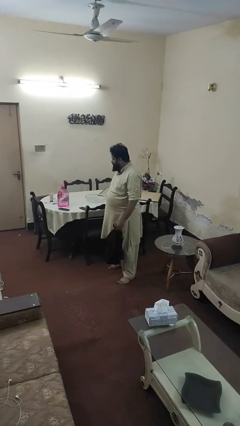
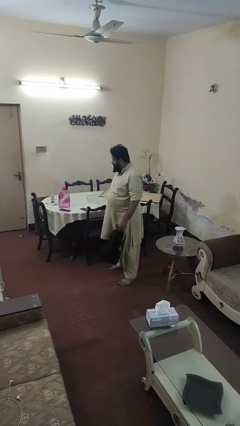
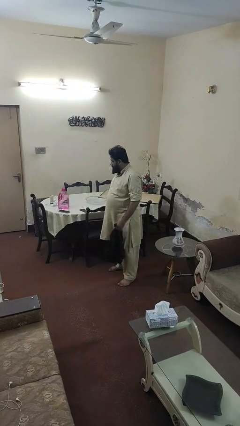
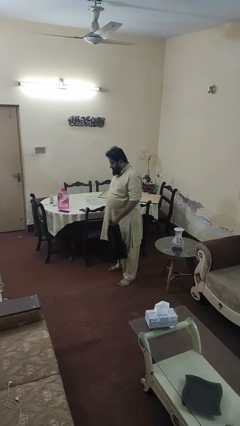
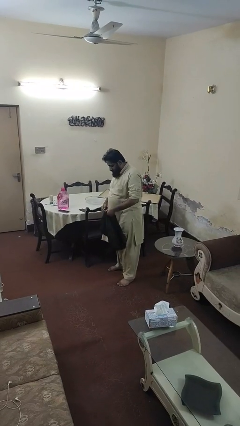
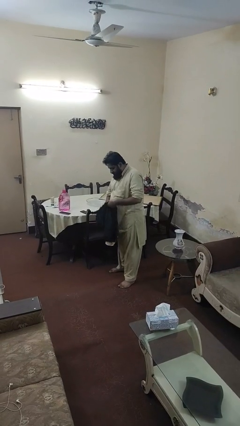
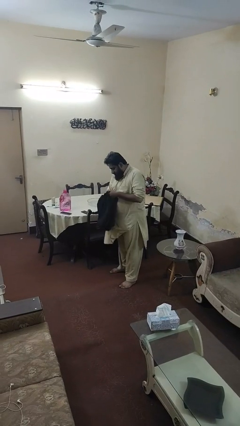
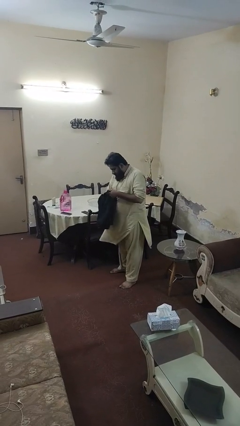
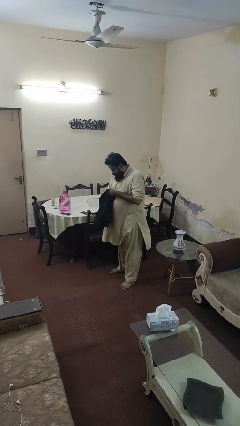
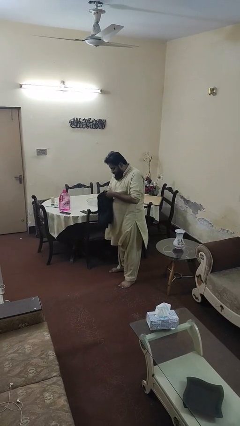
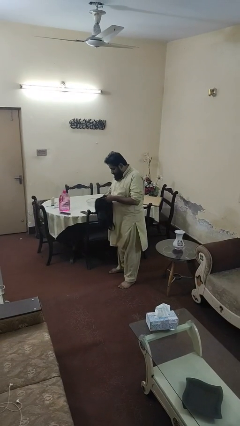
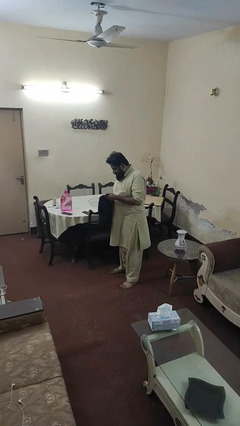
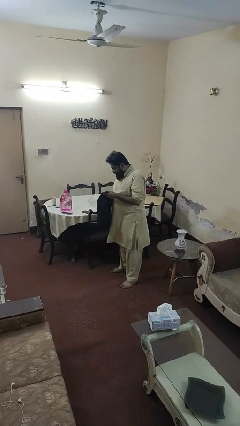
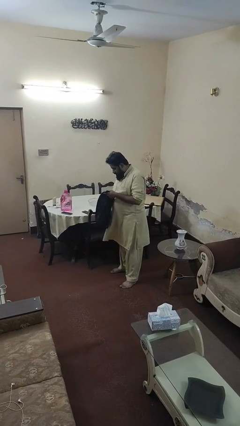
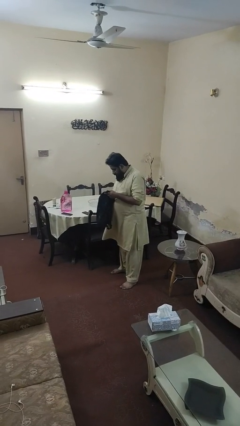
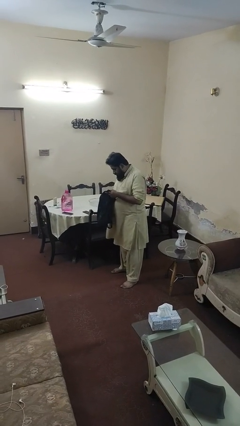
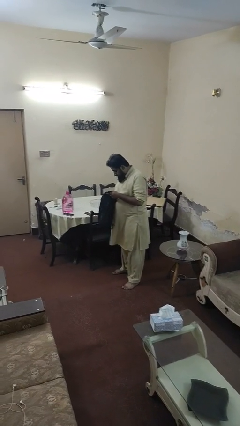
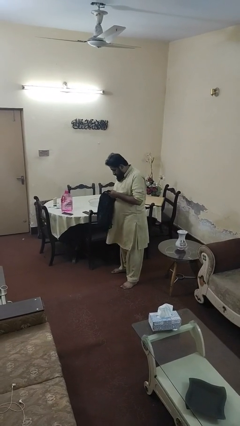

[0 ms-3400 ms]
person searches in backpack

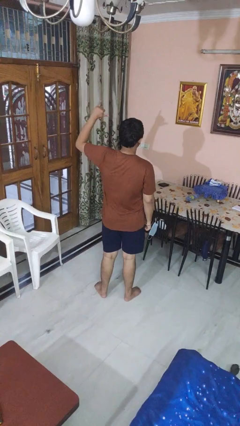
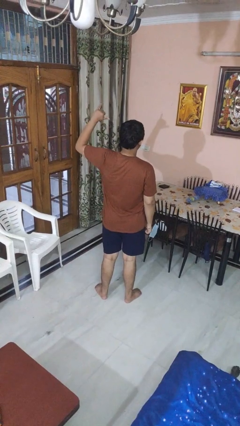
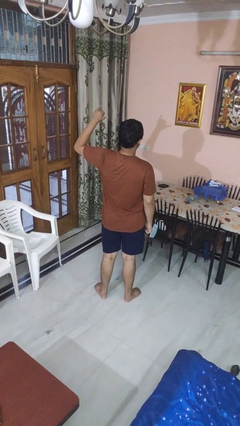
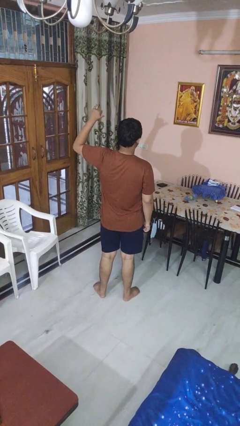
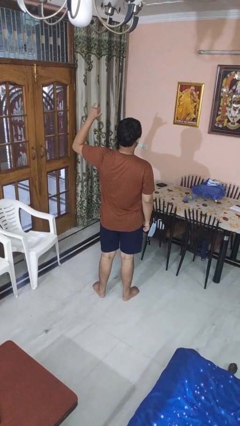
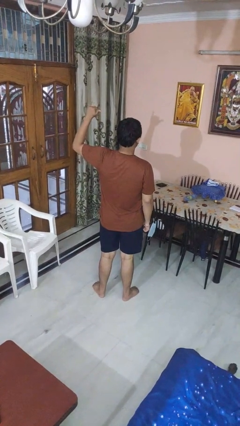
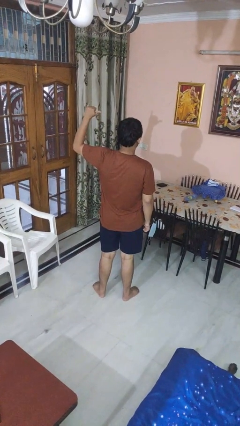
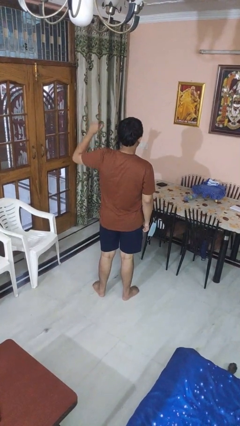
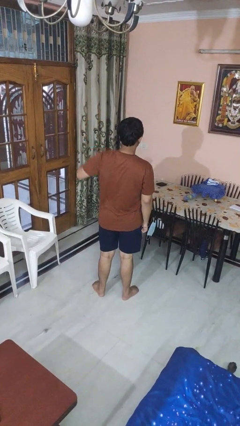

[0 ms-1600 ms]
person gestures hang loose

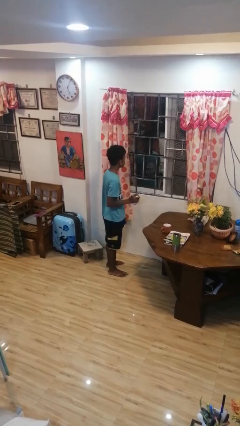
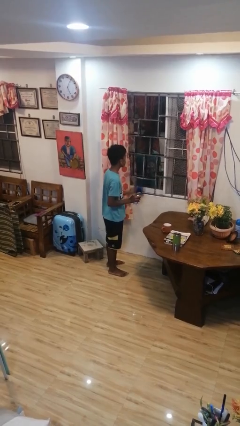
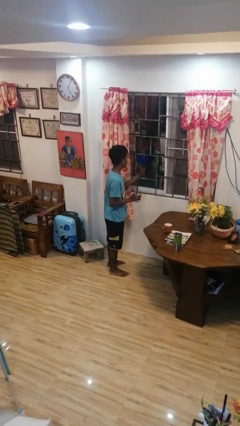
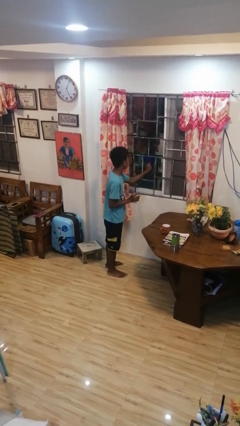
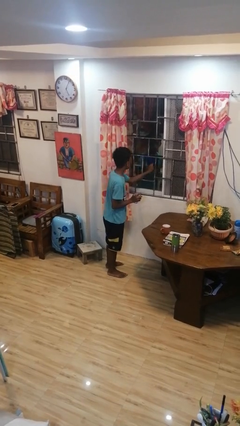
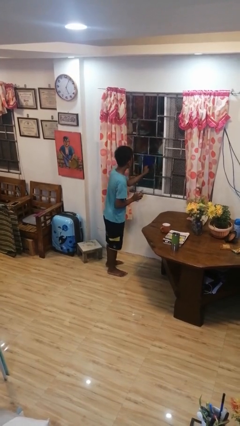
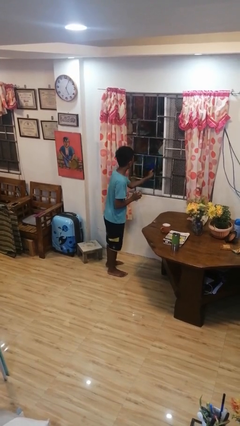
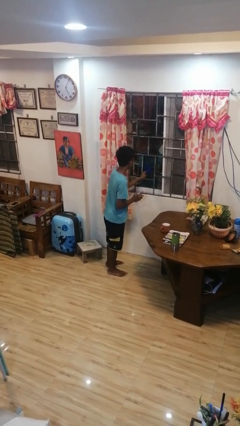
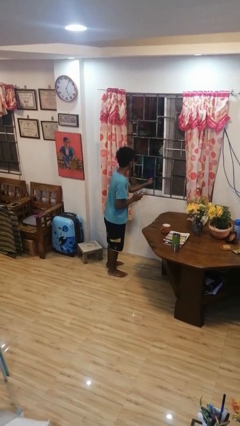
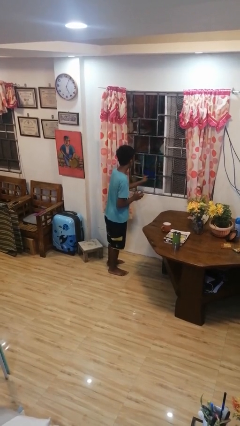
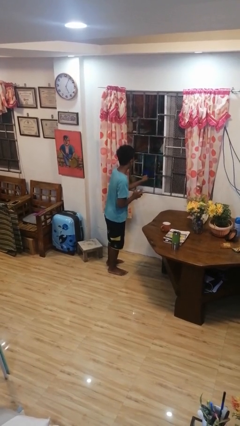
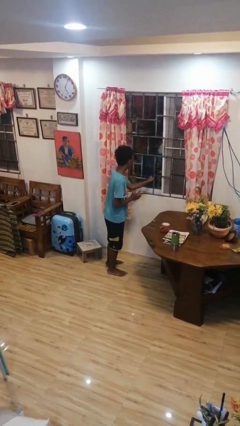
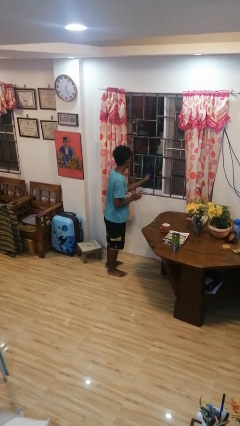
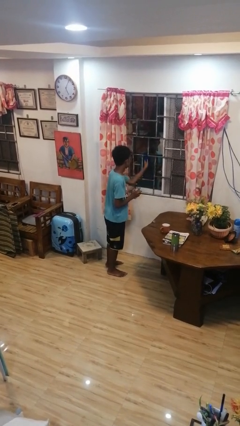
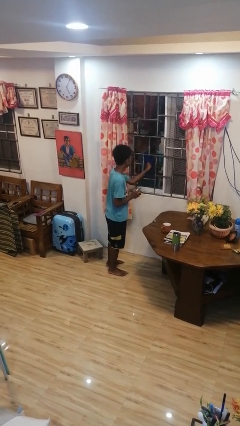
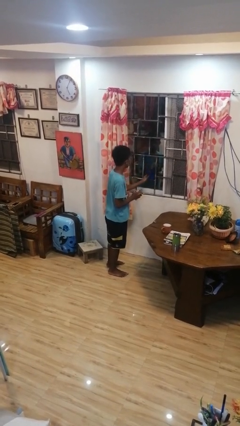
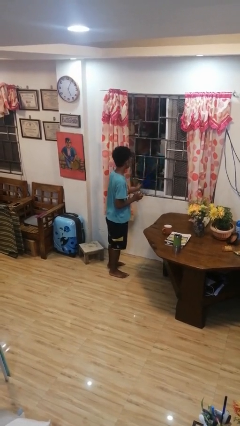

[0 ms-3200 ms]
person washes window

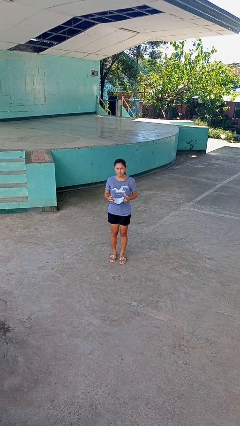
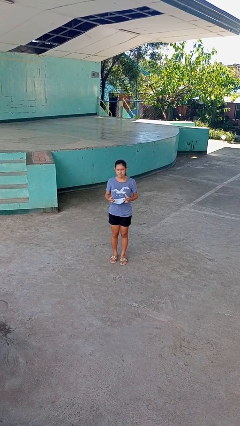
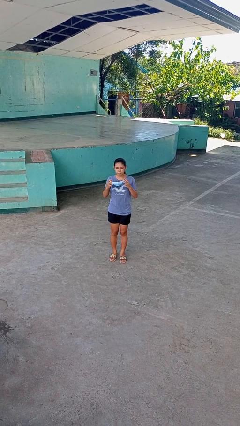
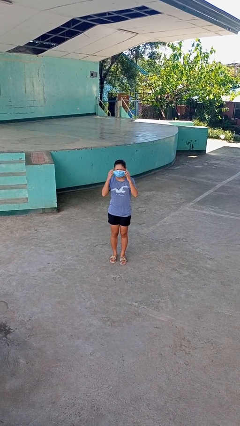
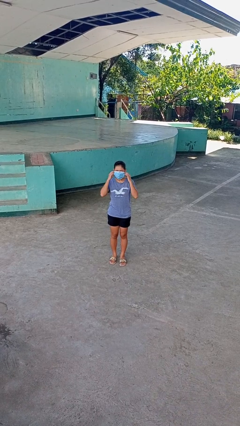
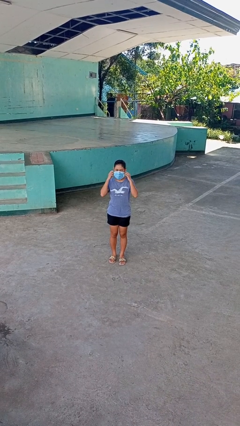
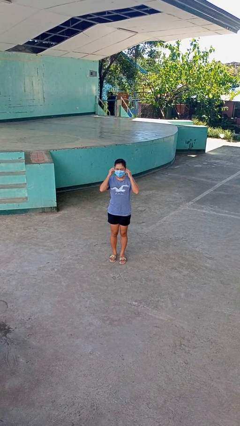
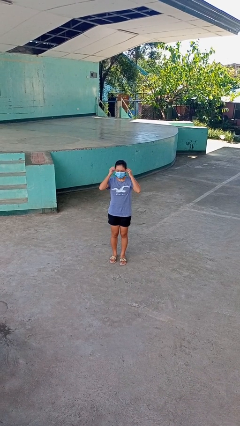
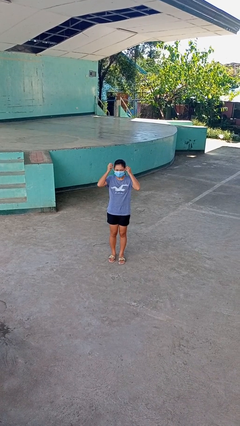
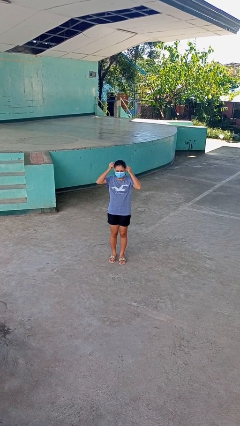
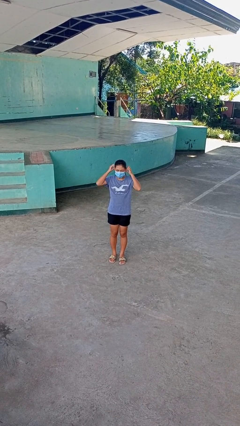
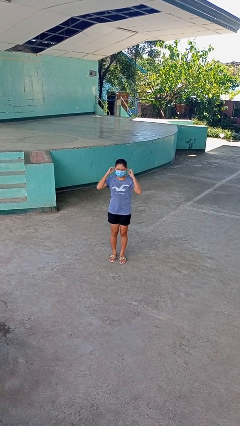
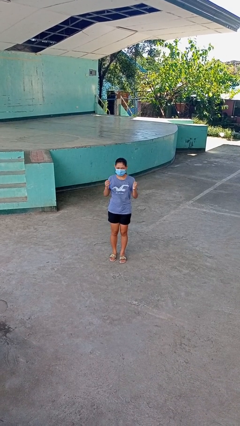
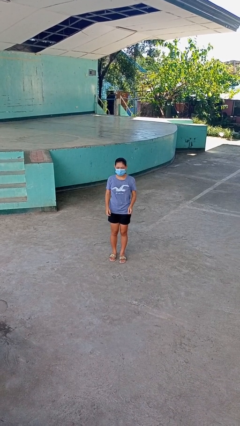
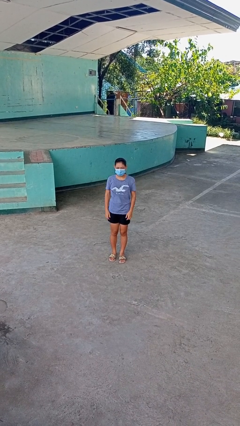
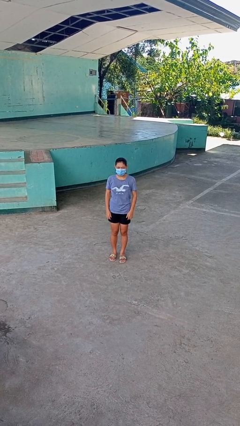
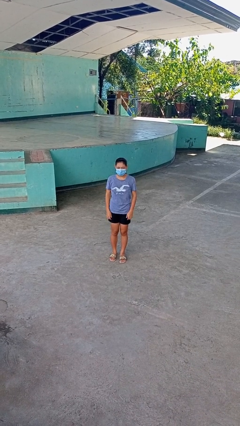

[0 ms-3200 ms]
person puts on facemask

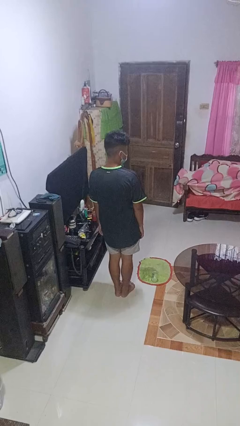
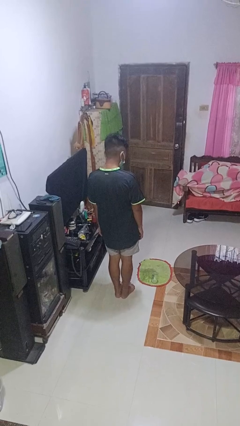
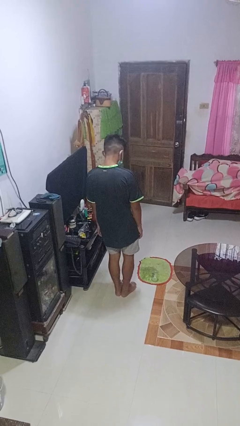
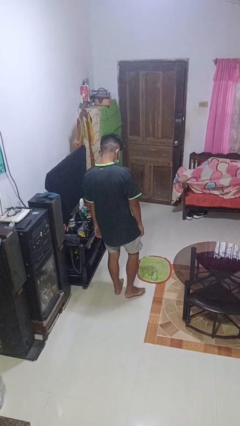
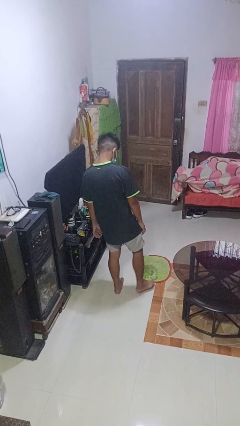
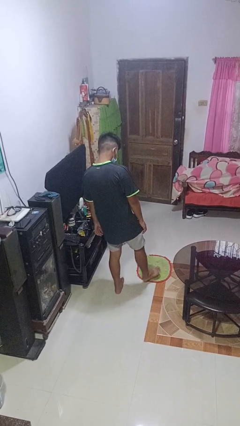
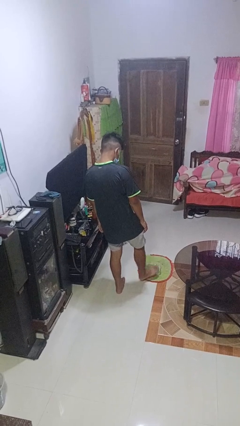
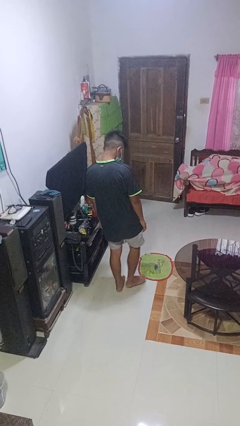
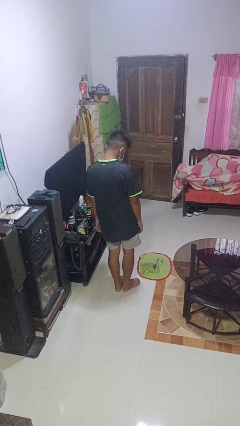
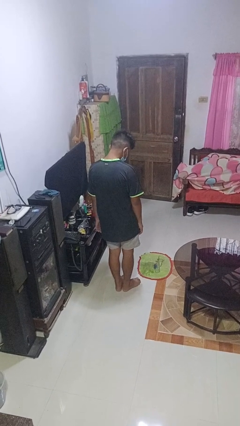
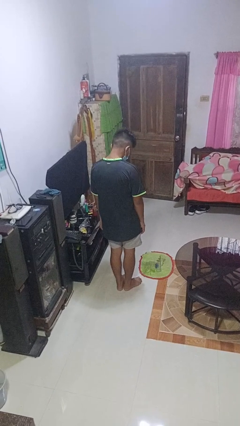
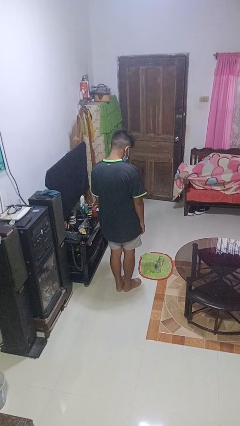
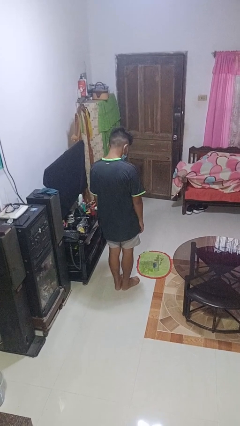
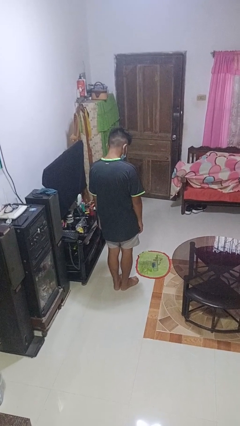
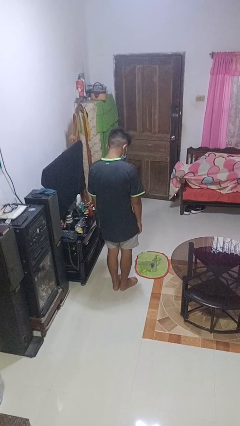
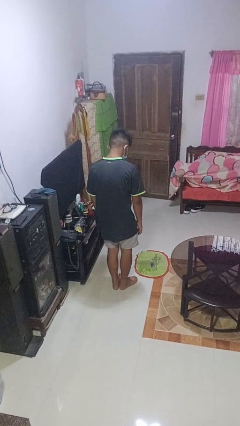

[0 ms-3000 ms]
person spills on floor

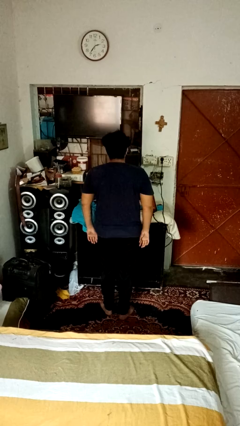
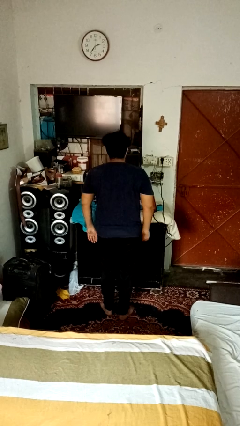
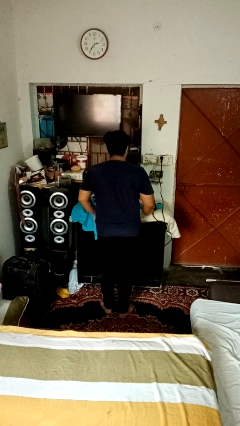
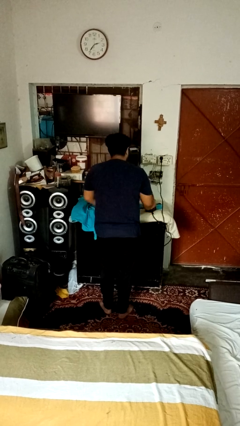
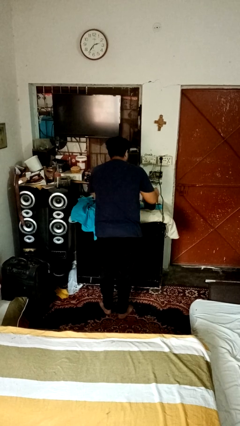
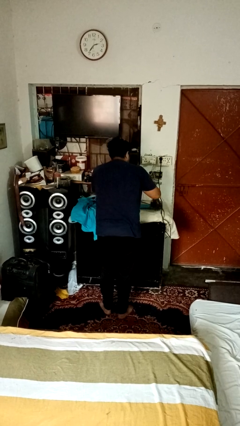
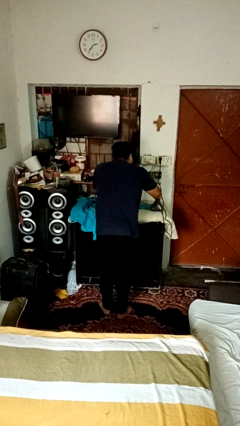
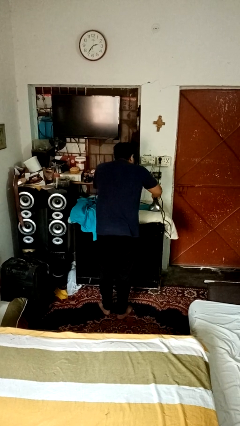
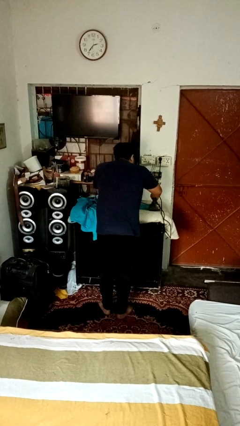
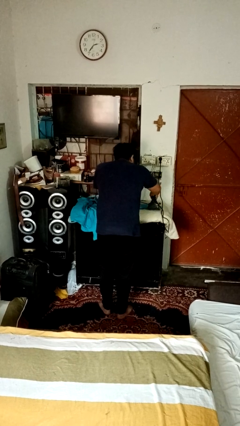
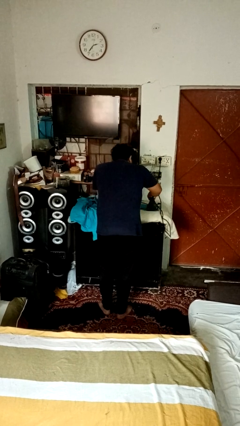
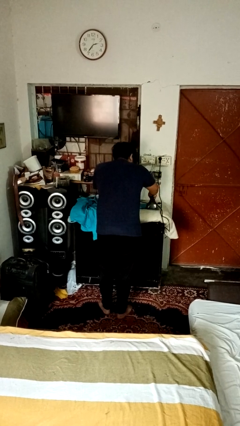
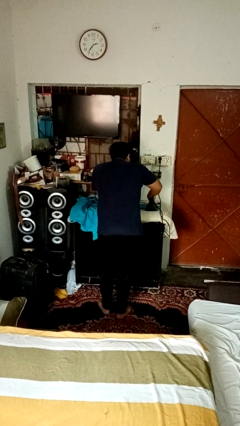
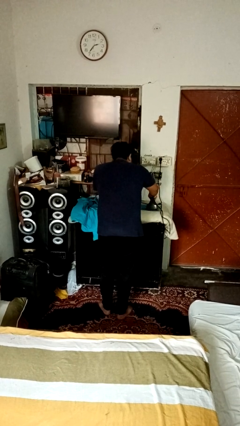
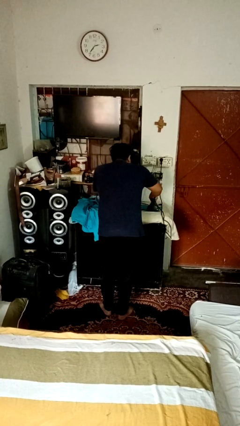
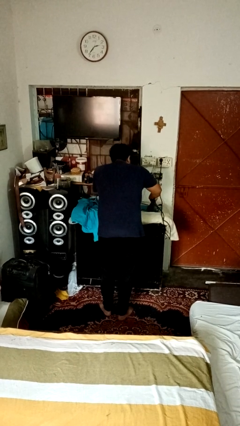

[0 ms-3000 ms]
person irons clothes

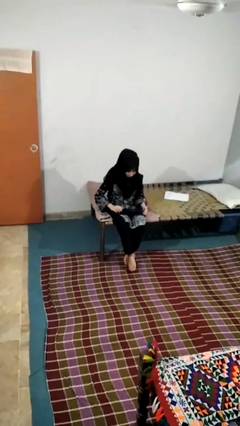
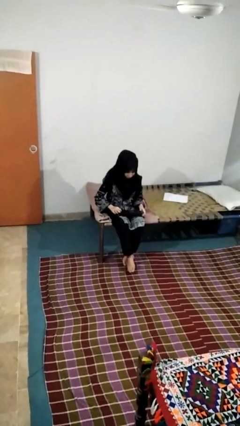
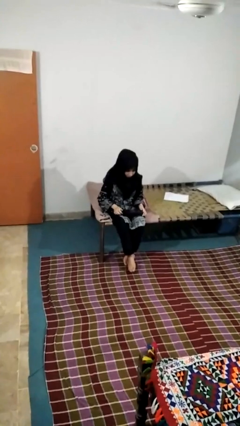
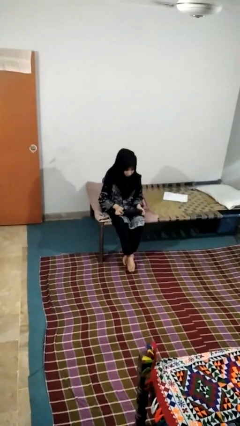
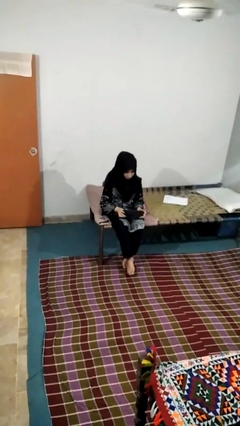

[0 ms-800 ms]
person closes jewelry box
